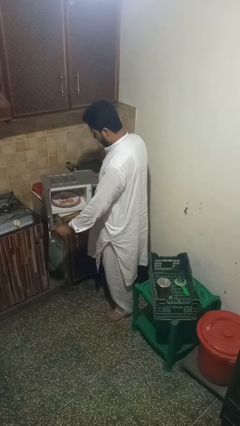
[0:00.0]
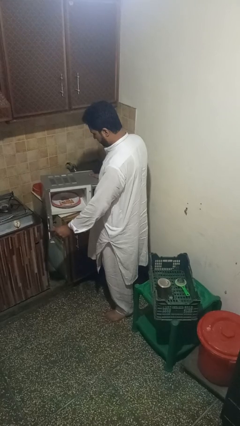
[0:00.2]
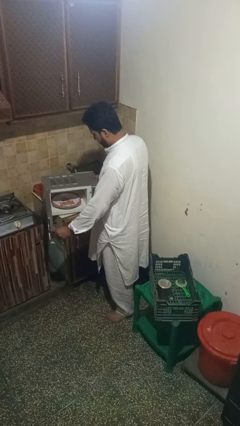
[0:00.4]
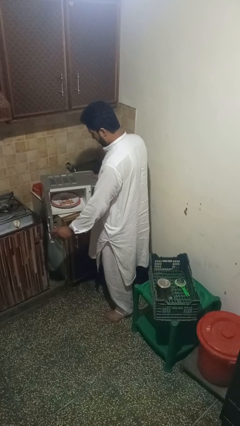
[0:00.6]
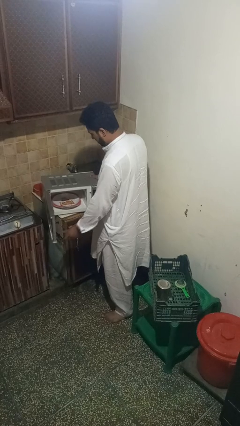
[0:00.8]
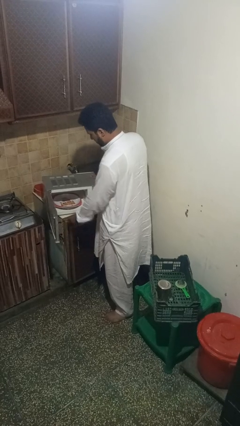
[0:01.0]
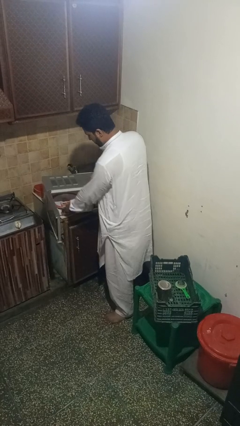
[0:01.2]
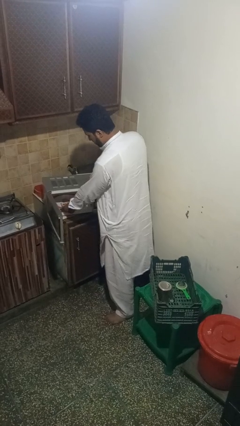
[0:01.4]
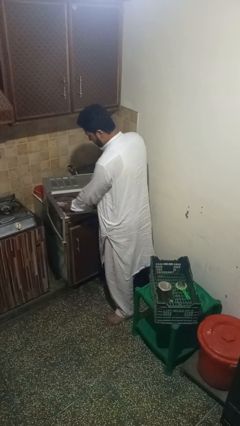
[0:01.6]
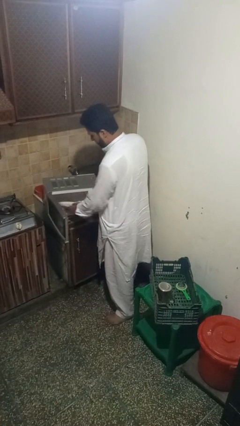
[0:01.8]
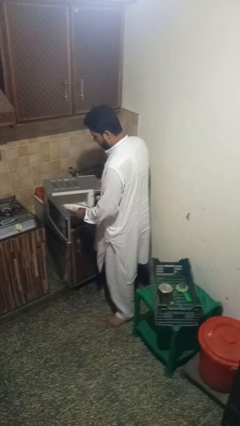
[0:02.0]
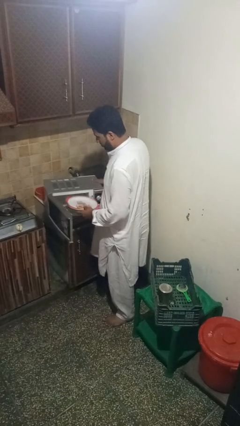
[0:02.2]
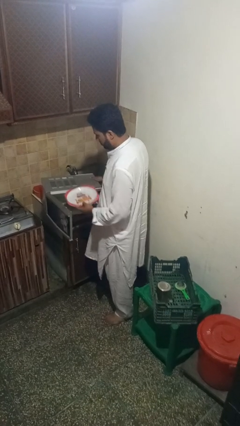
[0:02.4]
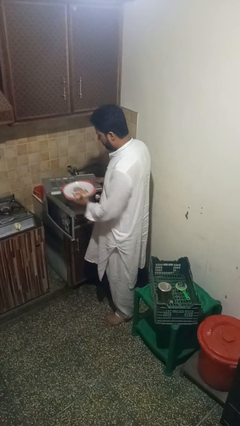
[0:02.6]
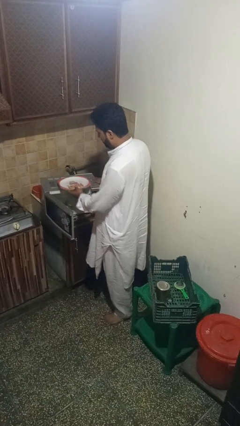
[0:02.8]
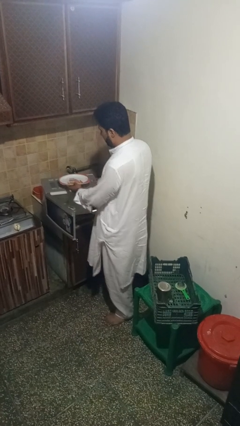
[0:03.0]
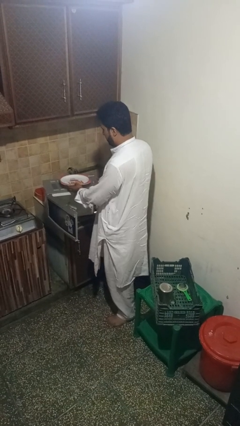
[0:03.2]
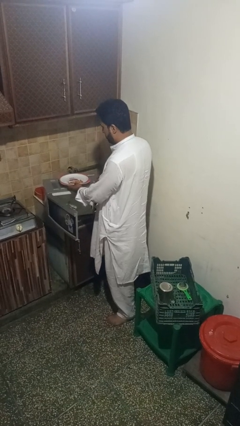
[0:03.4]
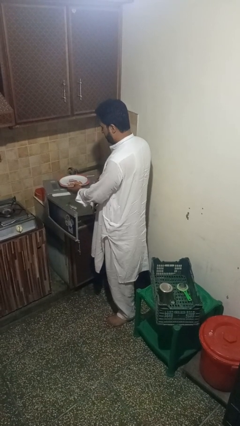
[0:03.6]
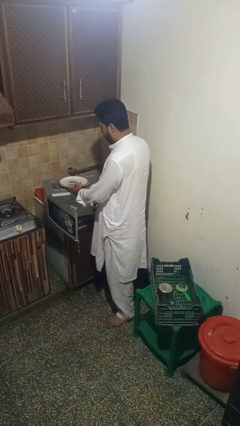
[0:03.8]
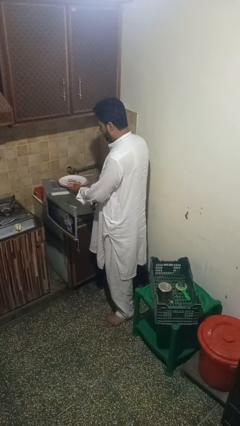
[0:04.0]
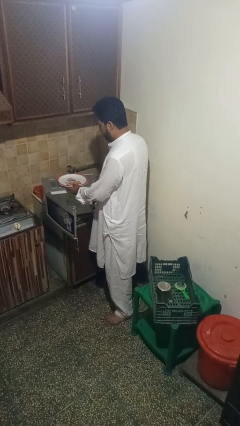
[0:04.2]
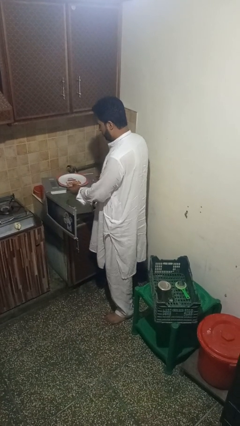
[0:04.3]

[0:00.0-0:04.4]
person takes object from microwave

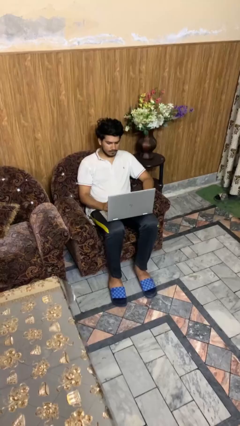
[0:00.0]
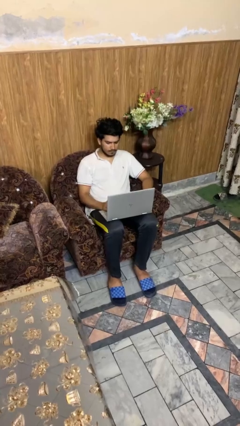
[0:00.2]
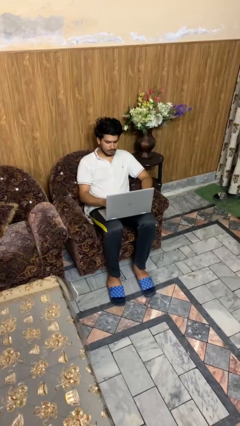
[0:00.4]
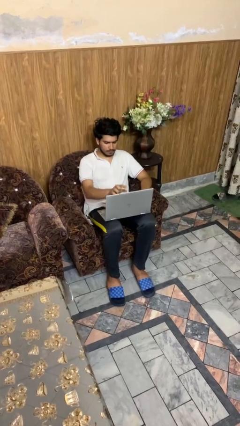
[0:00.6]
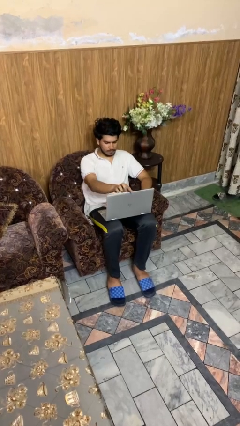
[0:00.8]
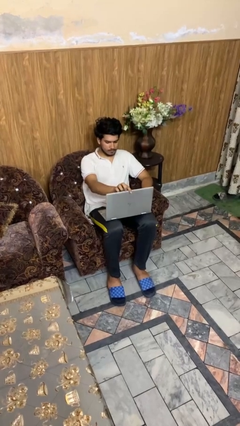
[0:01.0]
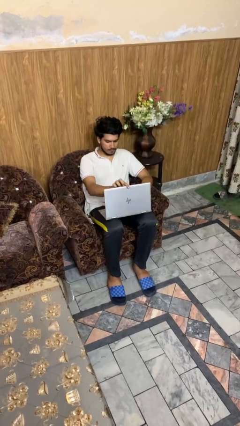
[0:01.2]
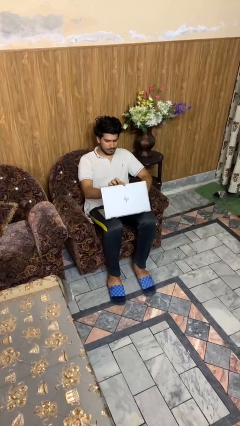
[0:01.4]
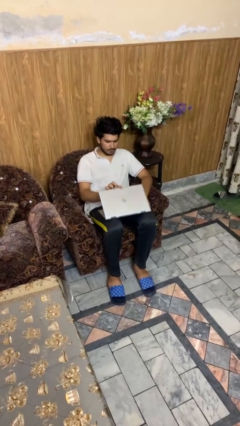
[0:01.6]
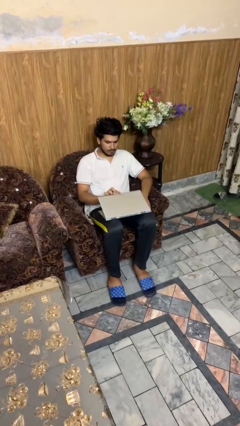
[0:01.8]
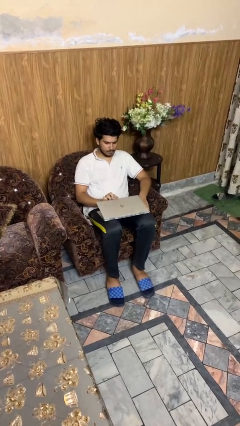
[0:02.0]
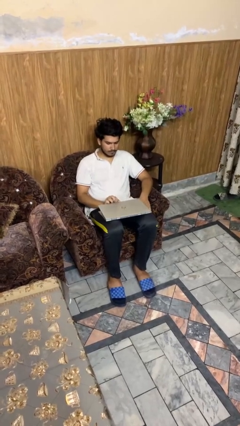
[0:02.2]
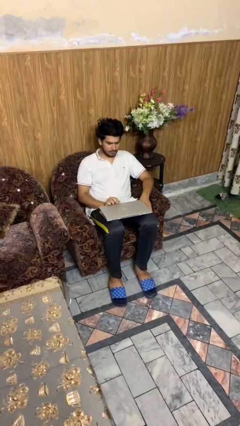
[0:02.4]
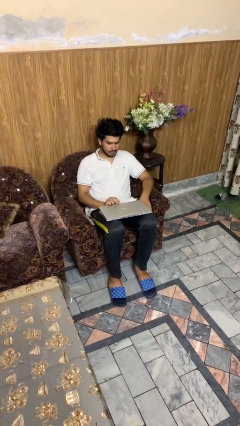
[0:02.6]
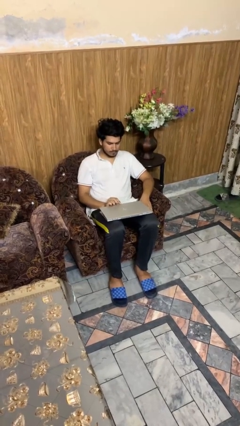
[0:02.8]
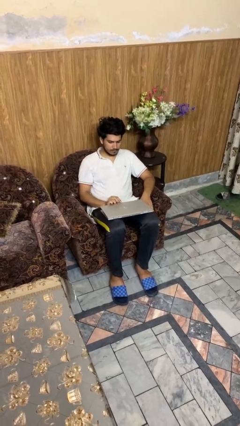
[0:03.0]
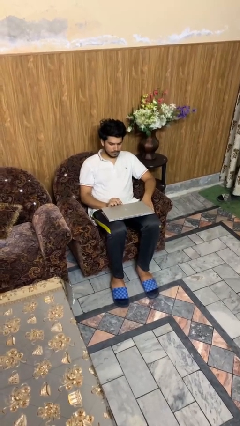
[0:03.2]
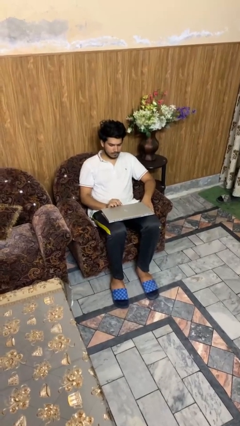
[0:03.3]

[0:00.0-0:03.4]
person closes laptop

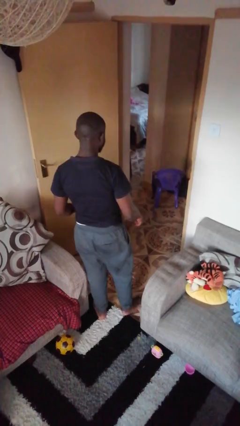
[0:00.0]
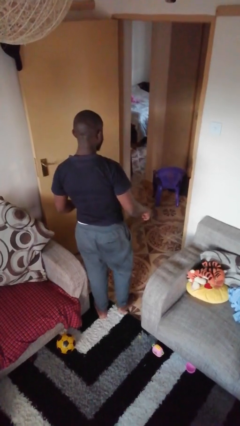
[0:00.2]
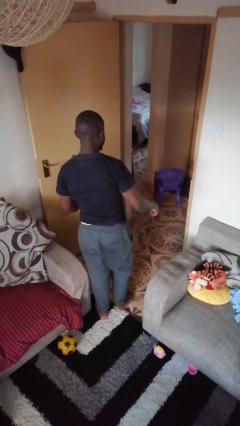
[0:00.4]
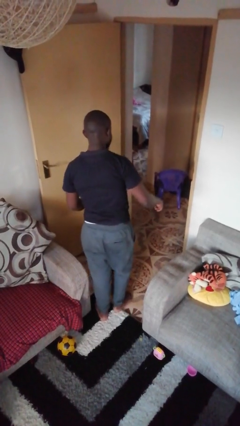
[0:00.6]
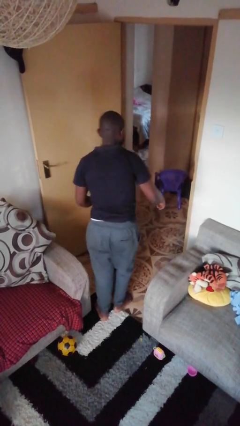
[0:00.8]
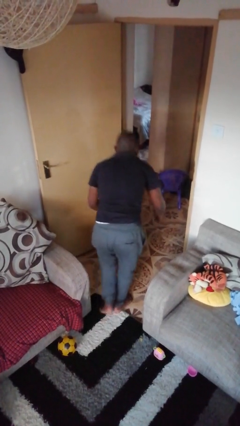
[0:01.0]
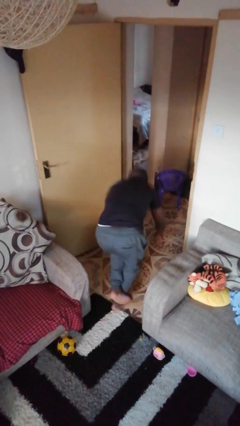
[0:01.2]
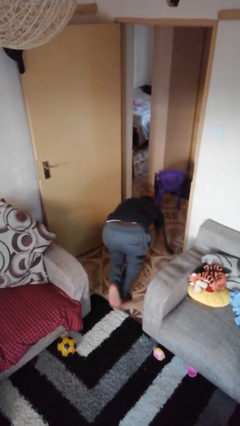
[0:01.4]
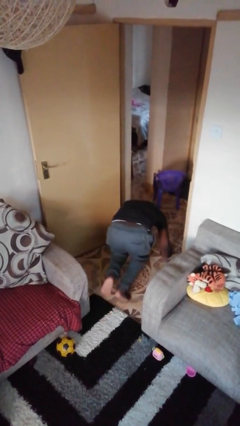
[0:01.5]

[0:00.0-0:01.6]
person trips on object on floor

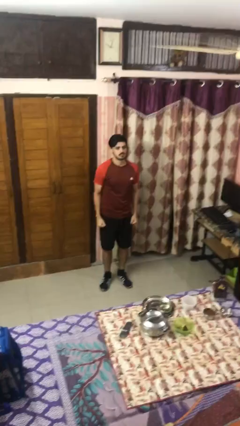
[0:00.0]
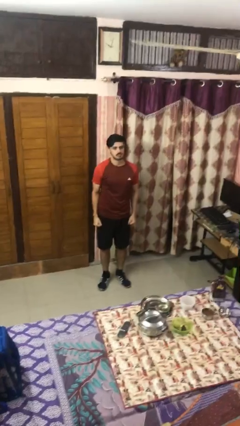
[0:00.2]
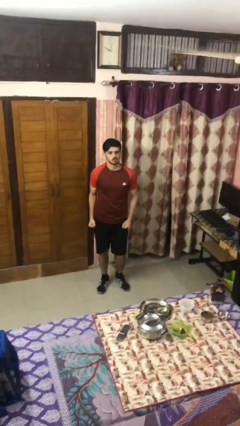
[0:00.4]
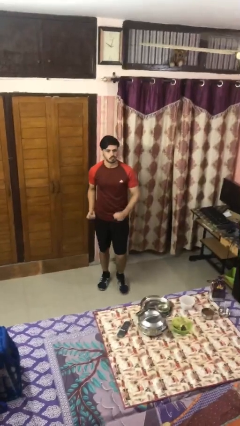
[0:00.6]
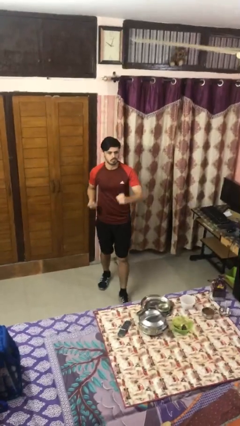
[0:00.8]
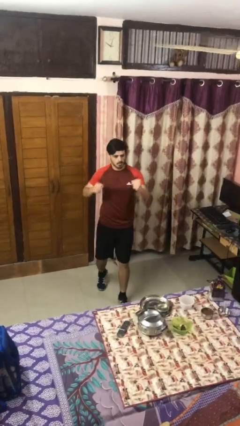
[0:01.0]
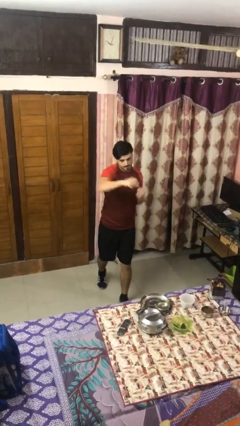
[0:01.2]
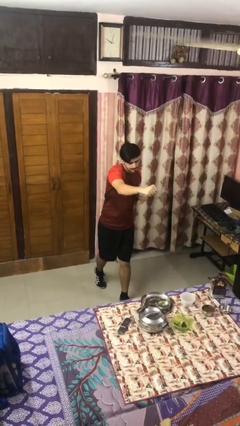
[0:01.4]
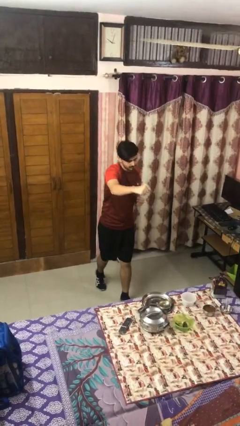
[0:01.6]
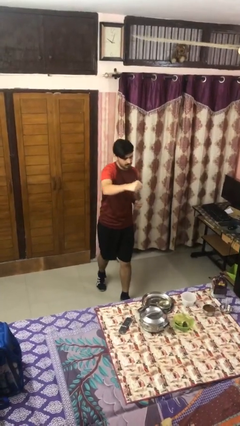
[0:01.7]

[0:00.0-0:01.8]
person punches

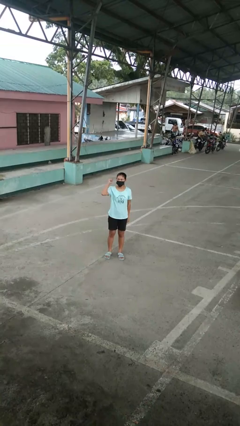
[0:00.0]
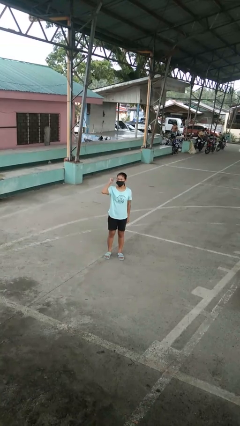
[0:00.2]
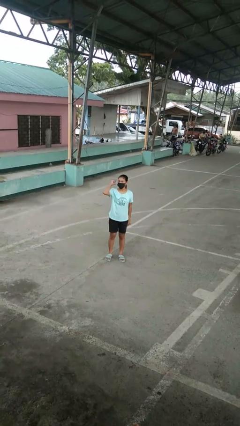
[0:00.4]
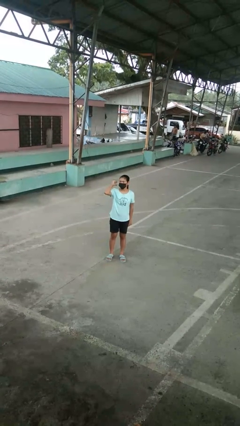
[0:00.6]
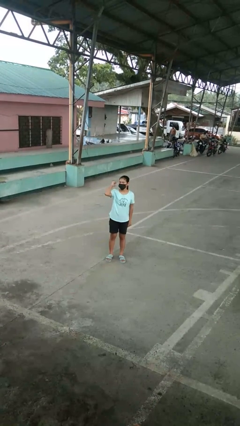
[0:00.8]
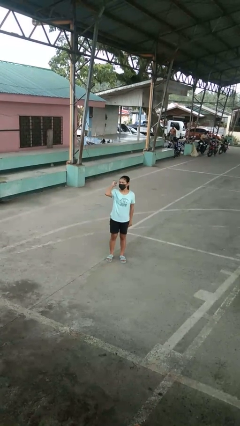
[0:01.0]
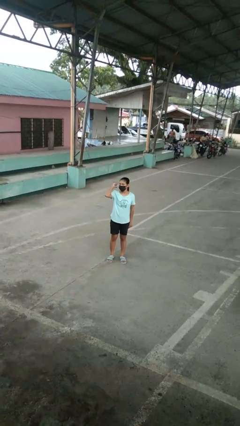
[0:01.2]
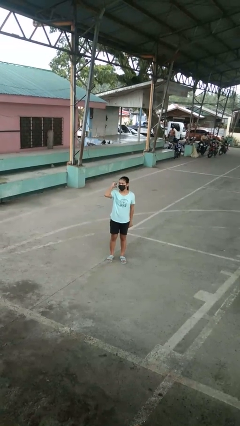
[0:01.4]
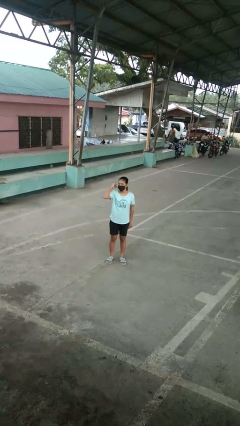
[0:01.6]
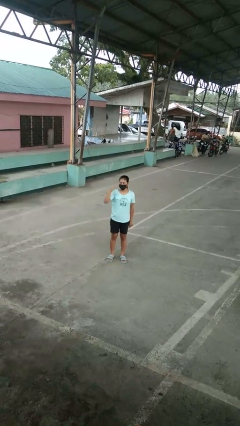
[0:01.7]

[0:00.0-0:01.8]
person gestures behind me

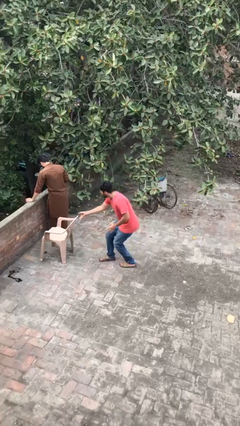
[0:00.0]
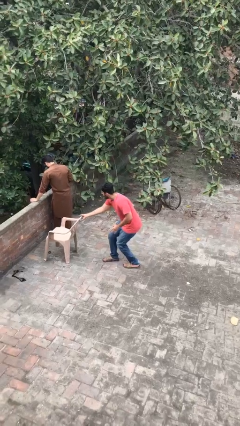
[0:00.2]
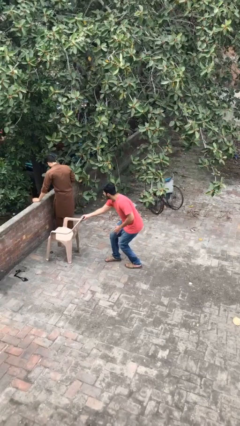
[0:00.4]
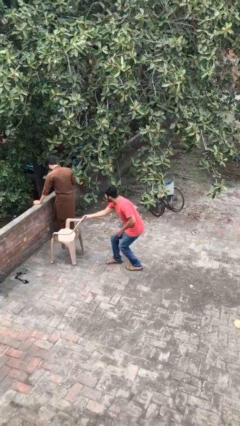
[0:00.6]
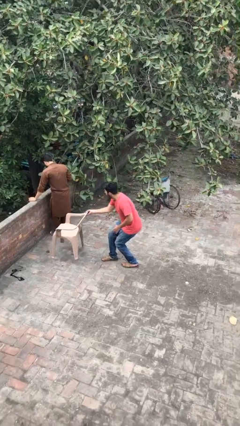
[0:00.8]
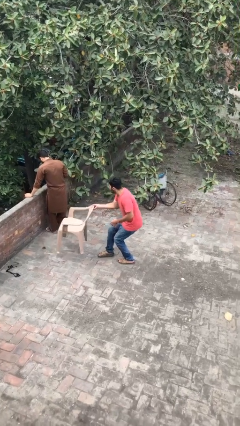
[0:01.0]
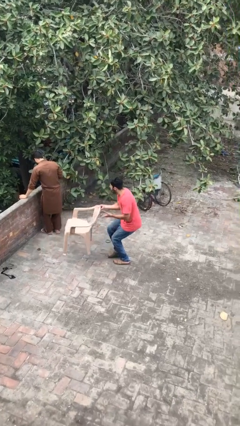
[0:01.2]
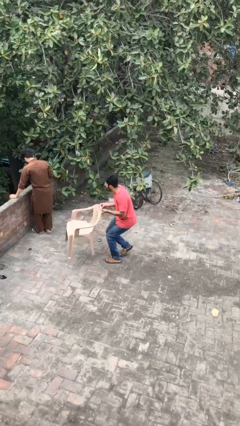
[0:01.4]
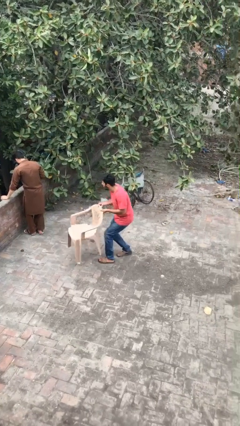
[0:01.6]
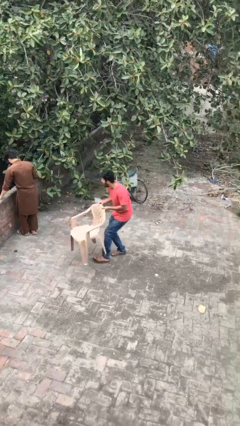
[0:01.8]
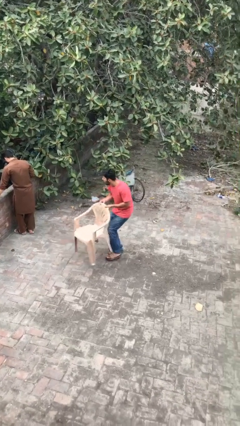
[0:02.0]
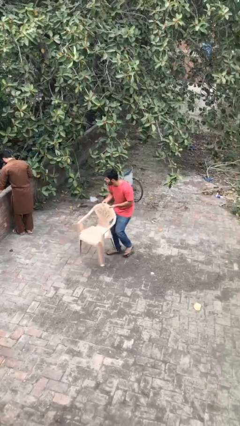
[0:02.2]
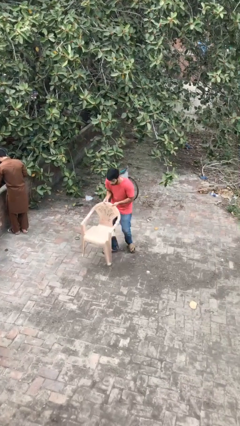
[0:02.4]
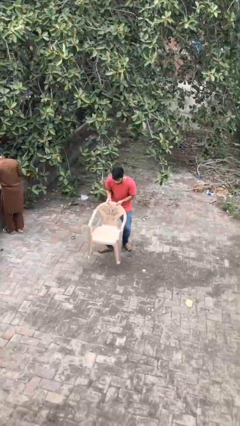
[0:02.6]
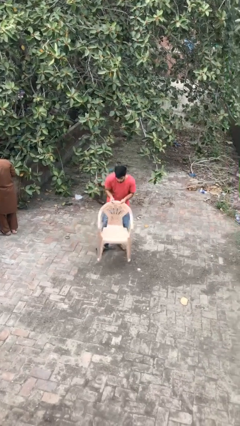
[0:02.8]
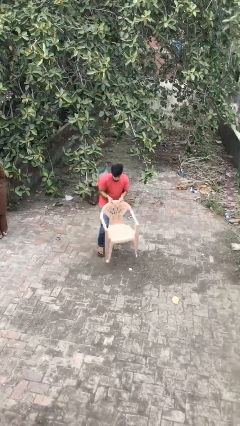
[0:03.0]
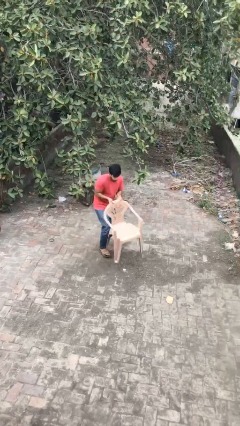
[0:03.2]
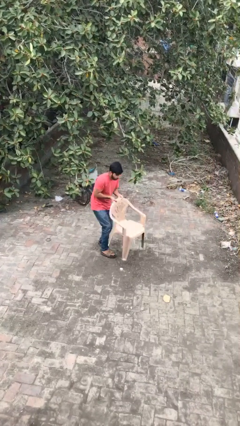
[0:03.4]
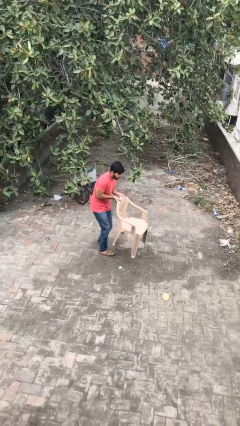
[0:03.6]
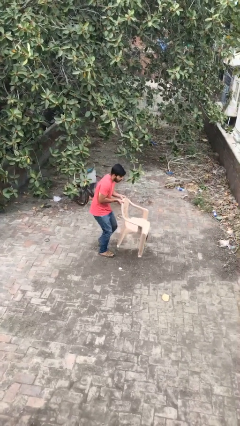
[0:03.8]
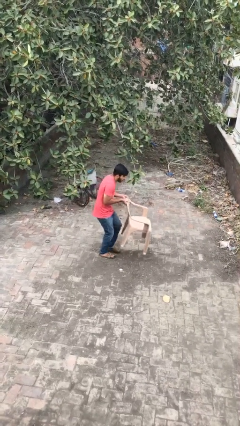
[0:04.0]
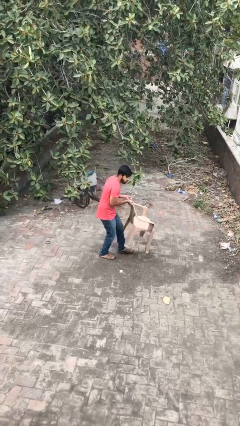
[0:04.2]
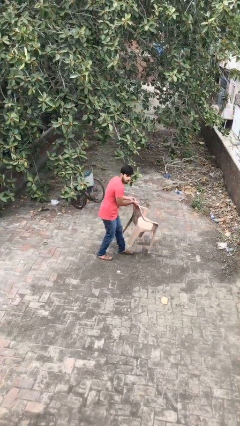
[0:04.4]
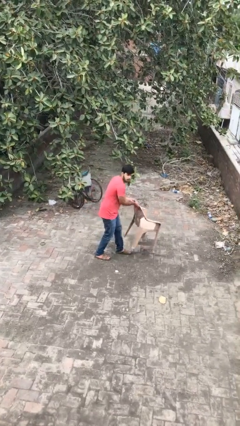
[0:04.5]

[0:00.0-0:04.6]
person steals object from person
